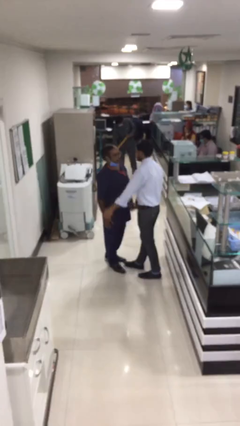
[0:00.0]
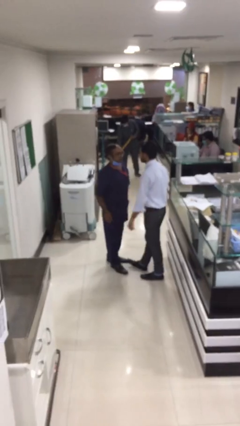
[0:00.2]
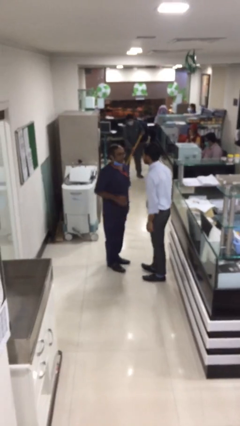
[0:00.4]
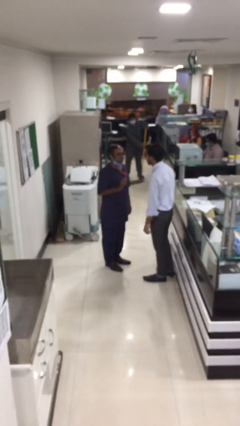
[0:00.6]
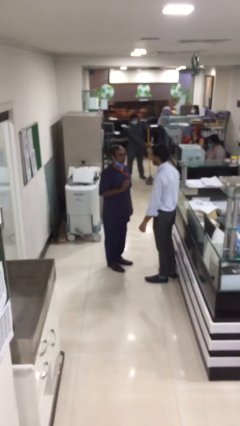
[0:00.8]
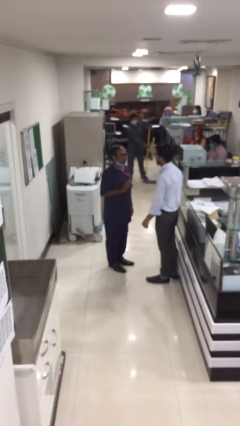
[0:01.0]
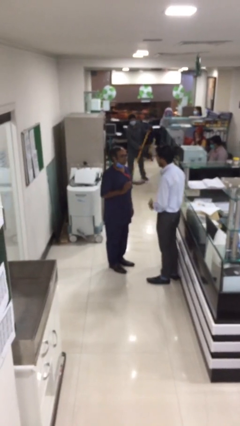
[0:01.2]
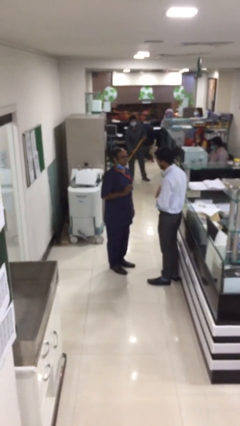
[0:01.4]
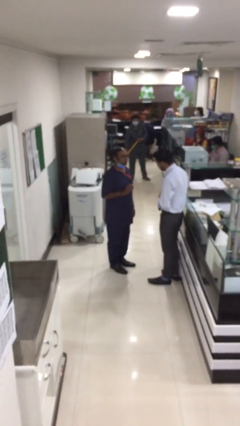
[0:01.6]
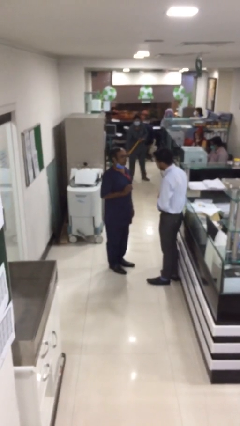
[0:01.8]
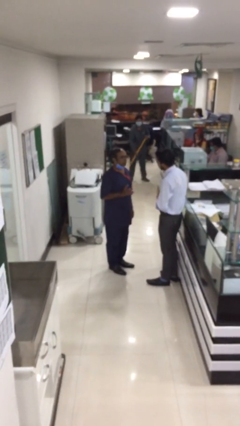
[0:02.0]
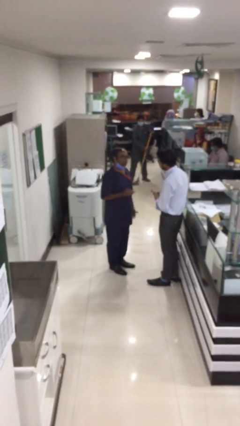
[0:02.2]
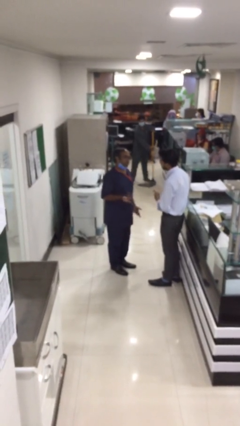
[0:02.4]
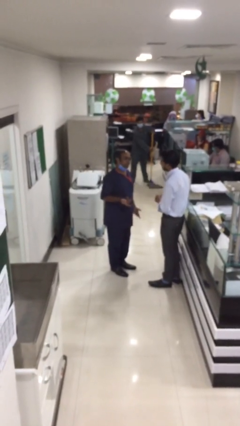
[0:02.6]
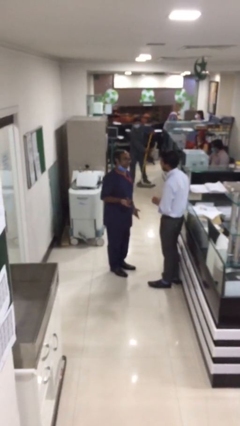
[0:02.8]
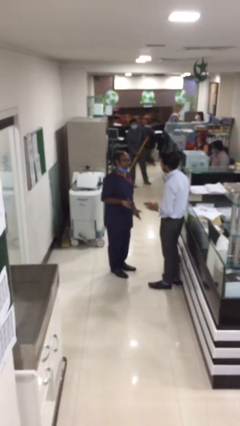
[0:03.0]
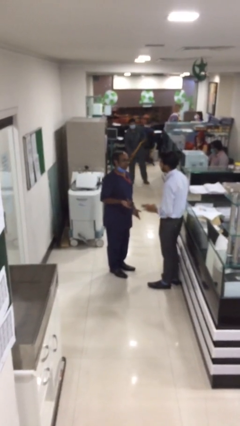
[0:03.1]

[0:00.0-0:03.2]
person talks to person

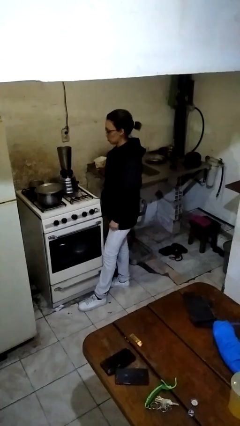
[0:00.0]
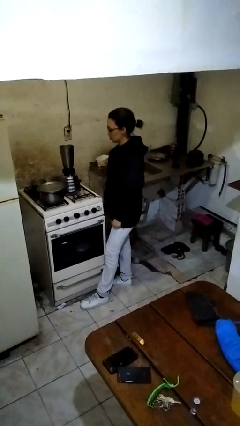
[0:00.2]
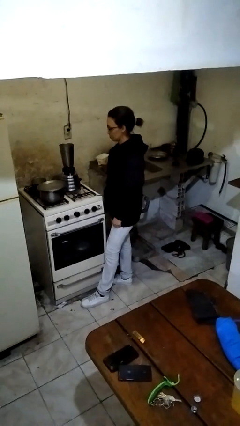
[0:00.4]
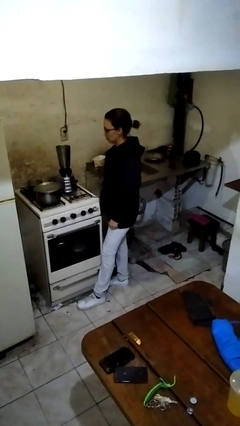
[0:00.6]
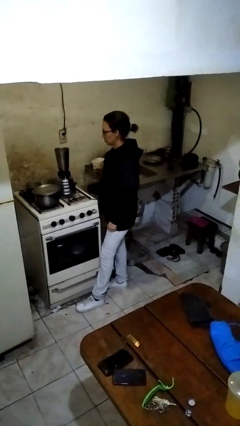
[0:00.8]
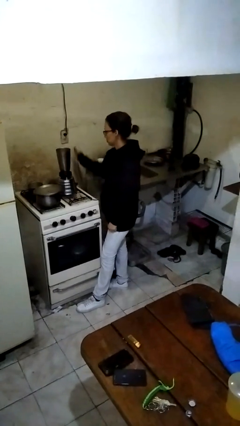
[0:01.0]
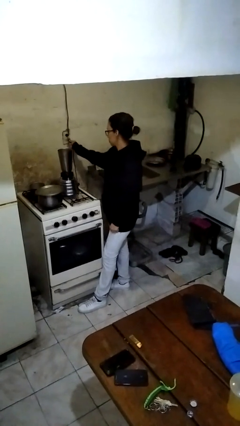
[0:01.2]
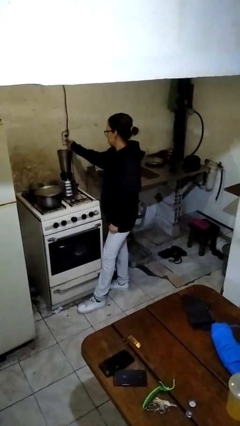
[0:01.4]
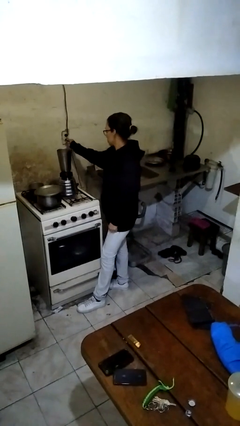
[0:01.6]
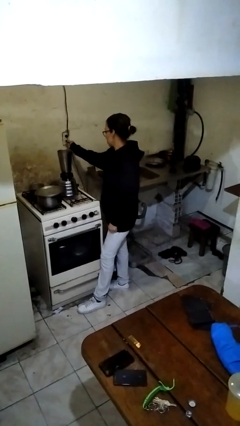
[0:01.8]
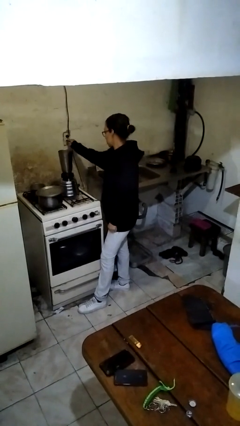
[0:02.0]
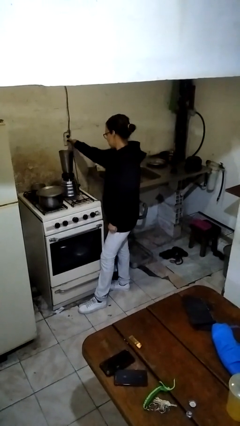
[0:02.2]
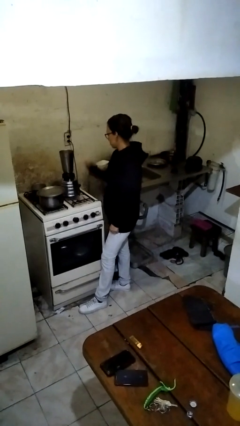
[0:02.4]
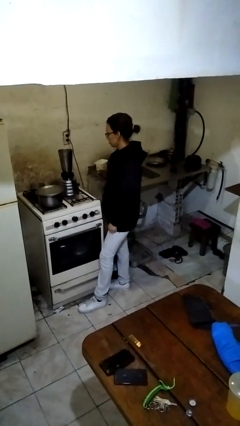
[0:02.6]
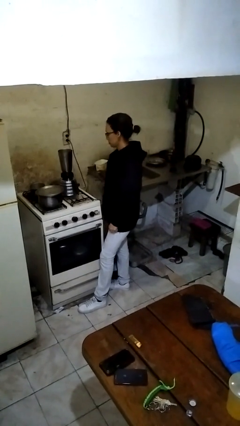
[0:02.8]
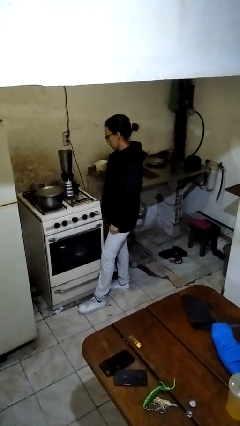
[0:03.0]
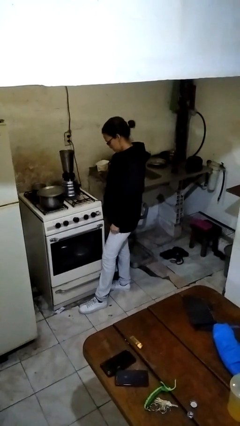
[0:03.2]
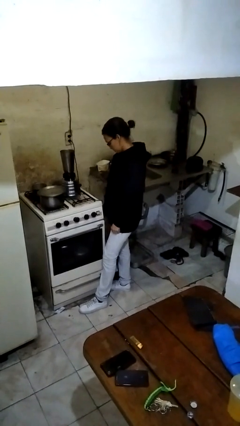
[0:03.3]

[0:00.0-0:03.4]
person plugs into electrical socket

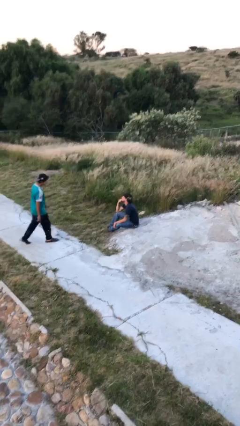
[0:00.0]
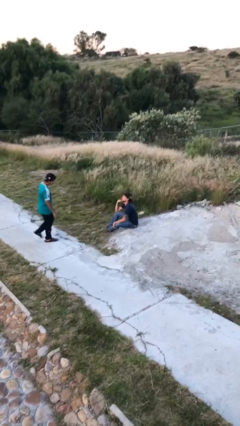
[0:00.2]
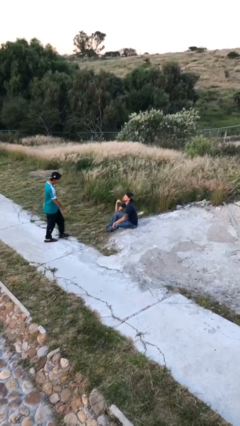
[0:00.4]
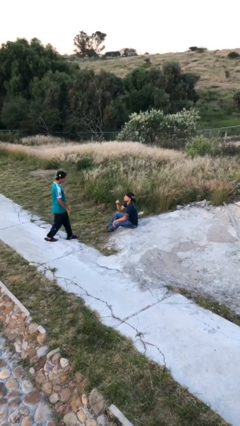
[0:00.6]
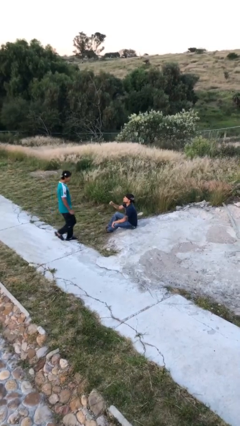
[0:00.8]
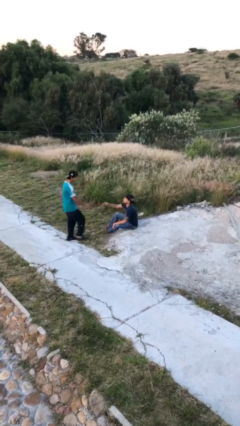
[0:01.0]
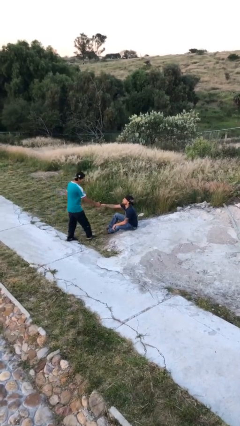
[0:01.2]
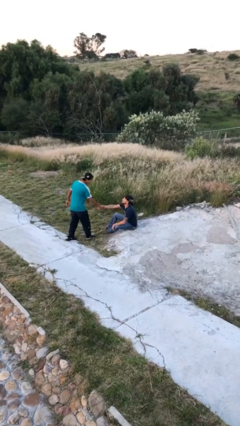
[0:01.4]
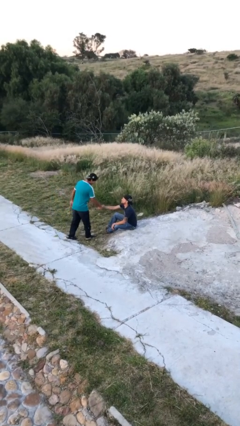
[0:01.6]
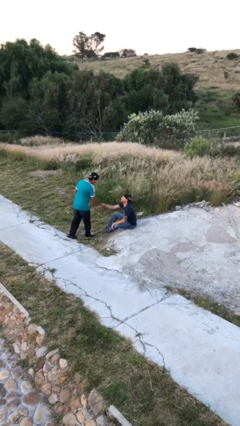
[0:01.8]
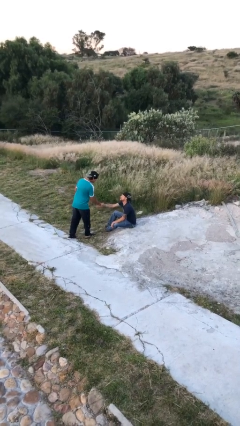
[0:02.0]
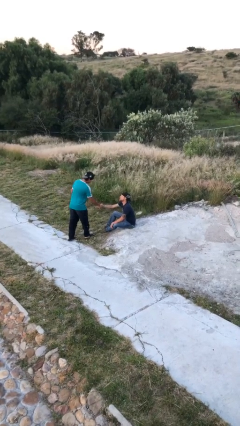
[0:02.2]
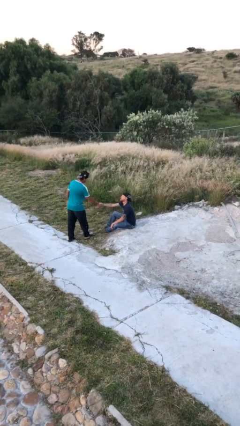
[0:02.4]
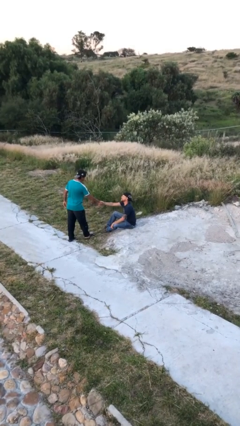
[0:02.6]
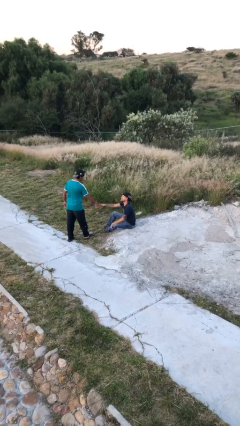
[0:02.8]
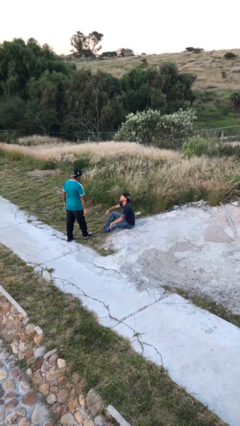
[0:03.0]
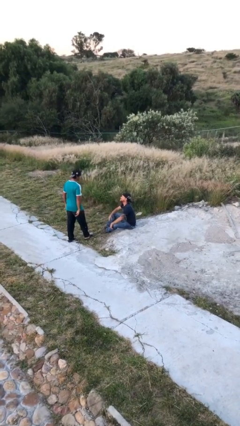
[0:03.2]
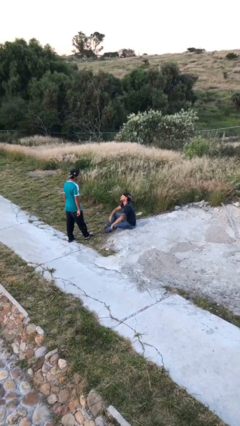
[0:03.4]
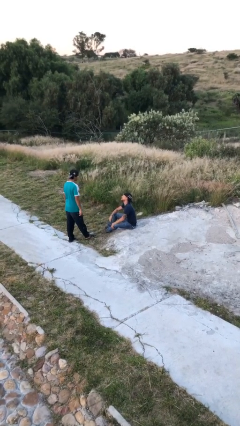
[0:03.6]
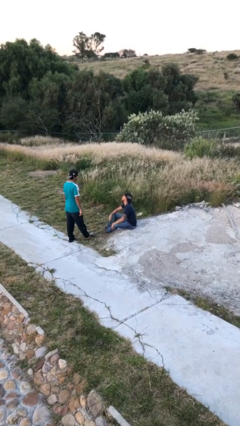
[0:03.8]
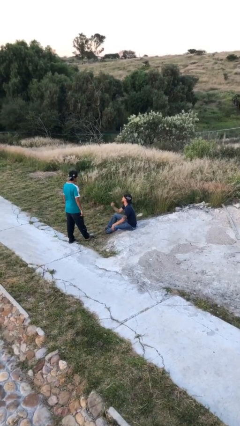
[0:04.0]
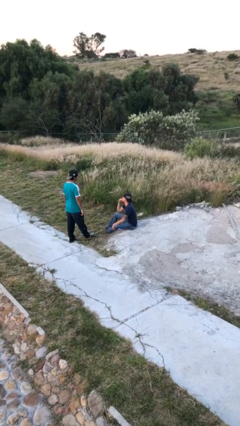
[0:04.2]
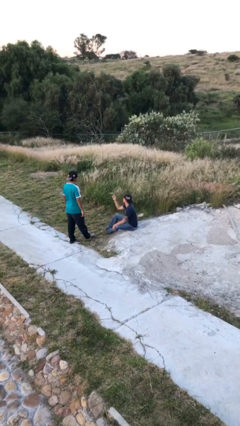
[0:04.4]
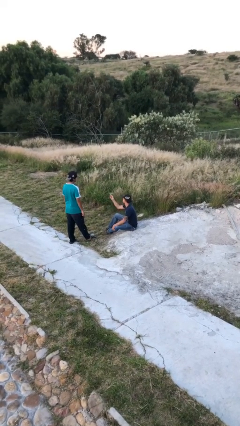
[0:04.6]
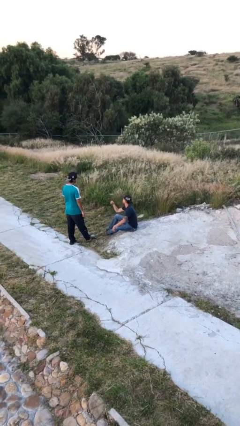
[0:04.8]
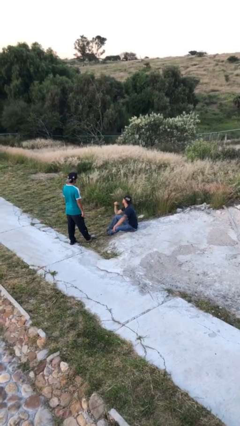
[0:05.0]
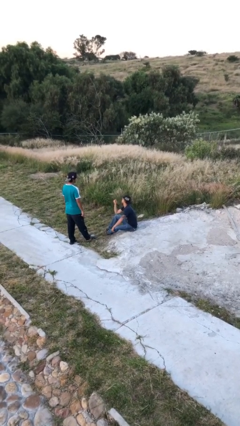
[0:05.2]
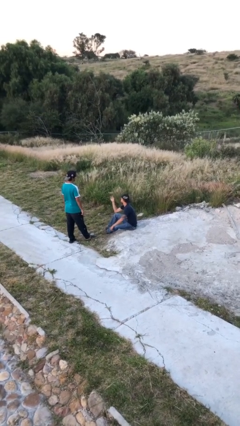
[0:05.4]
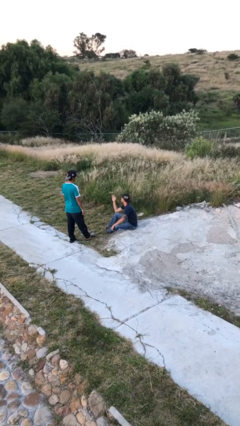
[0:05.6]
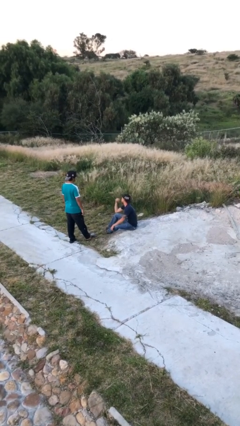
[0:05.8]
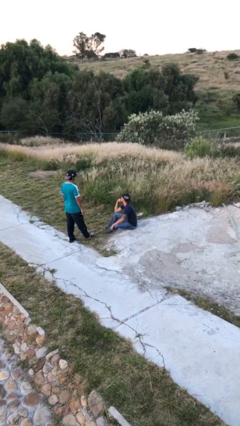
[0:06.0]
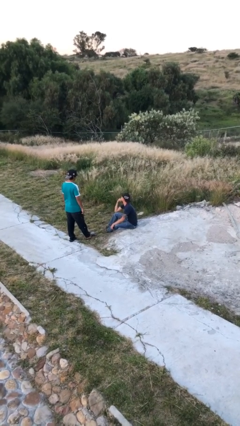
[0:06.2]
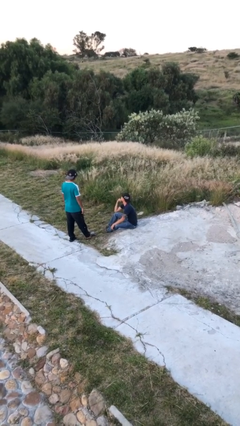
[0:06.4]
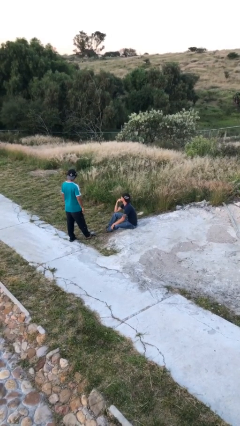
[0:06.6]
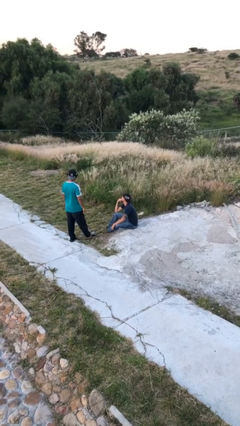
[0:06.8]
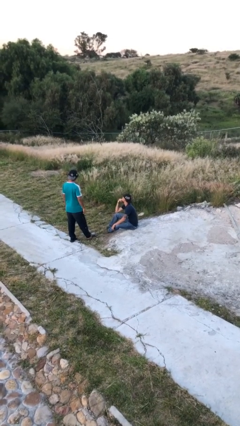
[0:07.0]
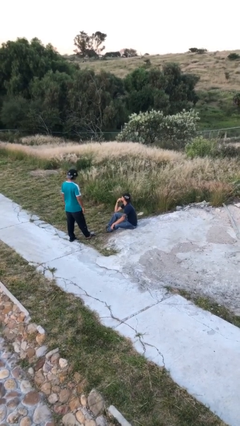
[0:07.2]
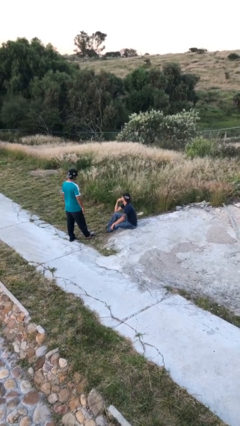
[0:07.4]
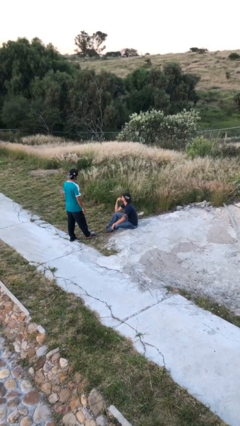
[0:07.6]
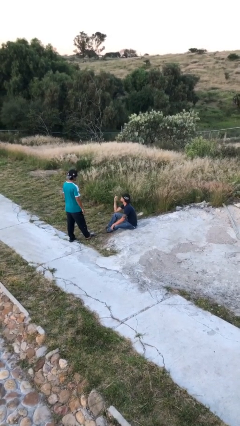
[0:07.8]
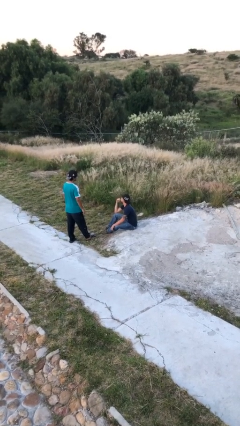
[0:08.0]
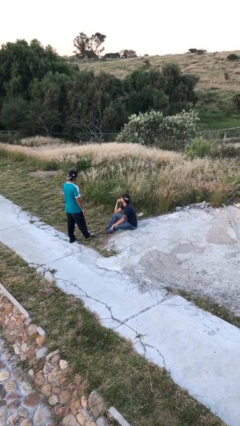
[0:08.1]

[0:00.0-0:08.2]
person shakes hand

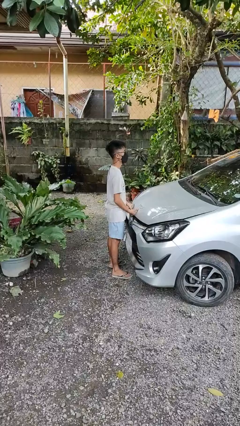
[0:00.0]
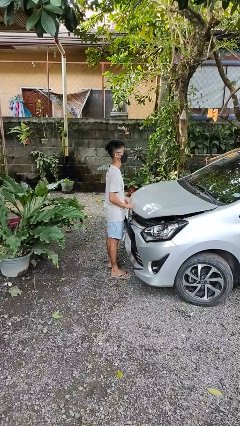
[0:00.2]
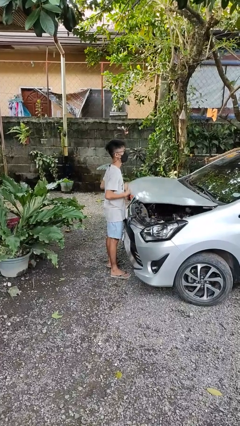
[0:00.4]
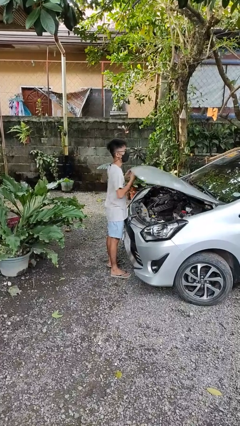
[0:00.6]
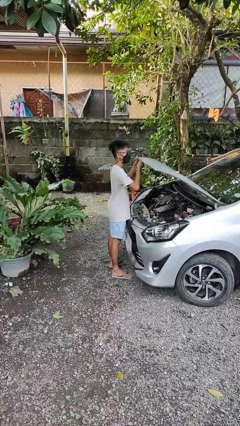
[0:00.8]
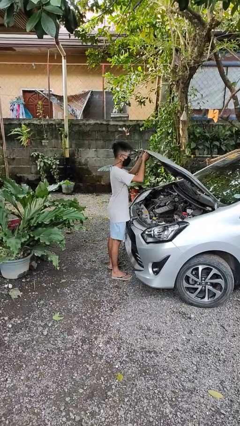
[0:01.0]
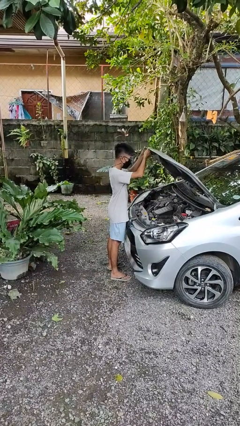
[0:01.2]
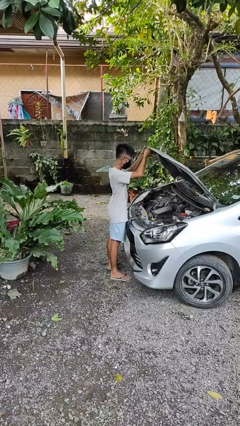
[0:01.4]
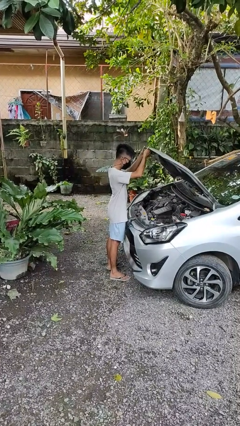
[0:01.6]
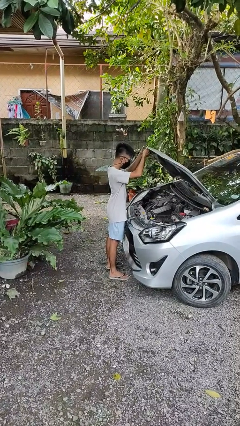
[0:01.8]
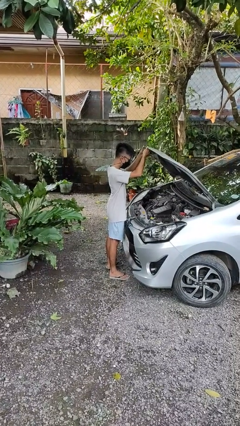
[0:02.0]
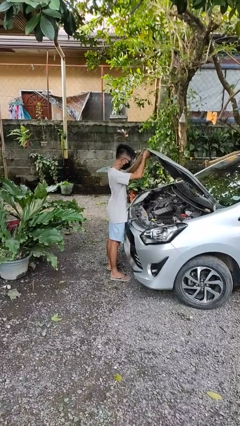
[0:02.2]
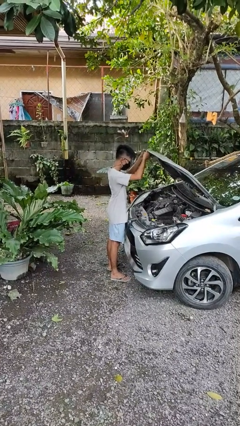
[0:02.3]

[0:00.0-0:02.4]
person opens car hood

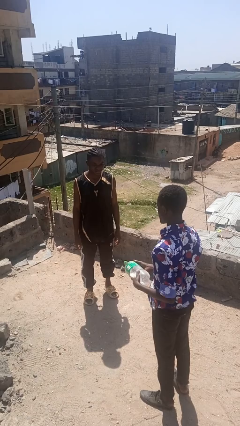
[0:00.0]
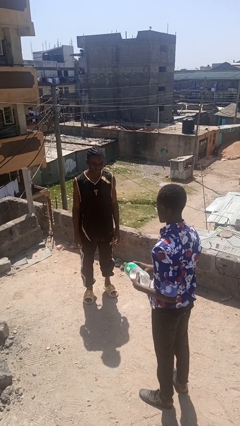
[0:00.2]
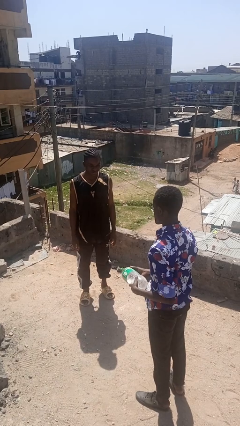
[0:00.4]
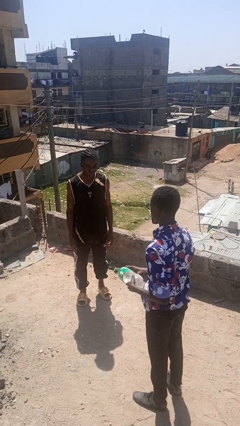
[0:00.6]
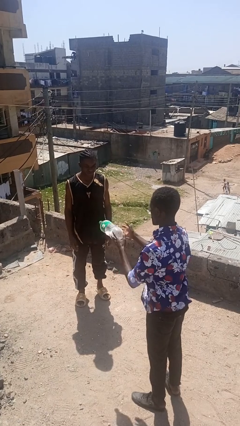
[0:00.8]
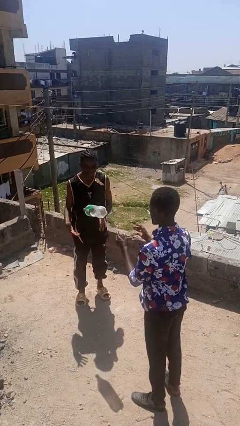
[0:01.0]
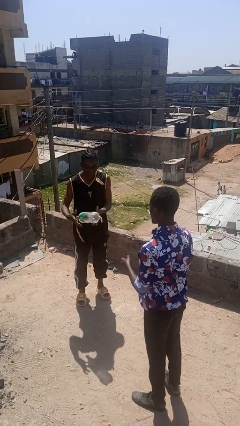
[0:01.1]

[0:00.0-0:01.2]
person throws object to person
